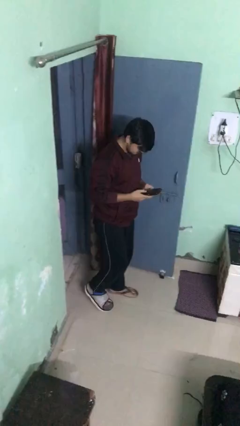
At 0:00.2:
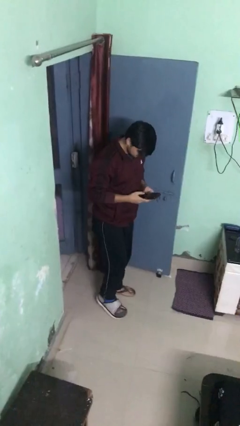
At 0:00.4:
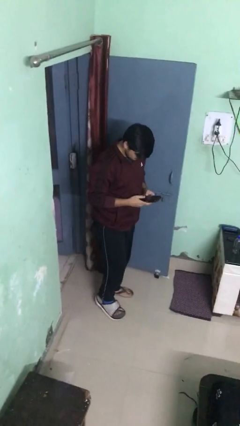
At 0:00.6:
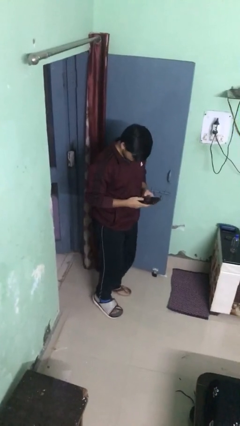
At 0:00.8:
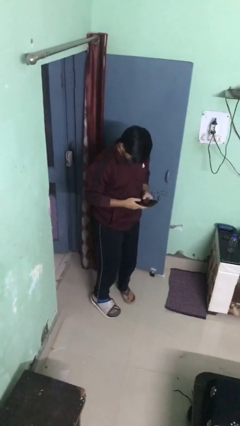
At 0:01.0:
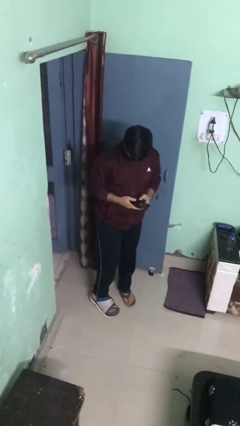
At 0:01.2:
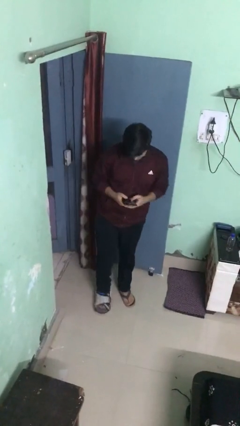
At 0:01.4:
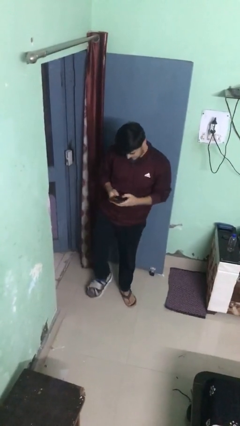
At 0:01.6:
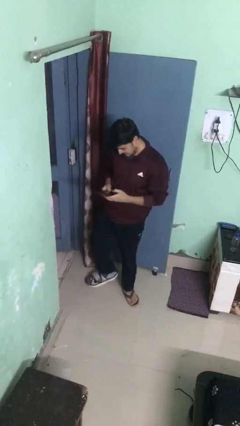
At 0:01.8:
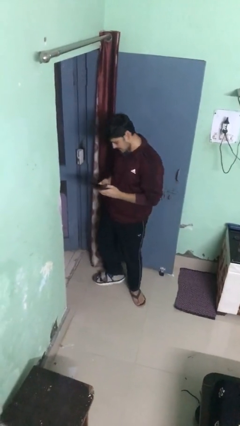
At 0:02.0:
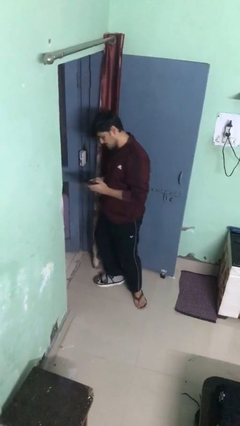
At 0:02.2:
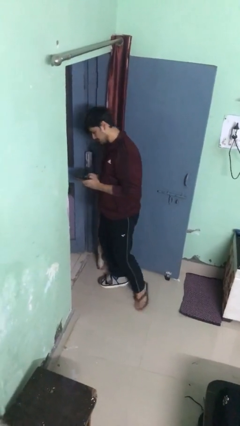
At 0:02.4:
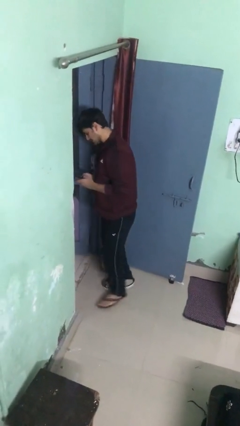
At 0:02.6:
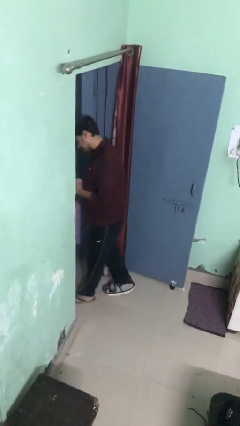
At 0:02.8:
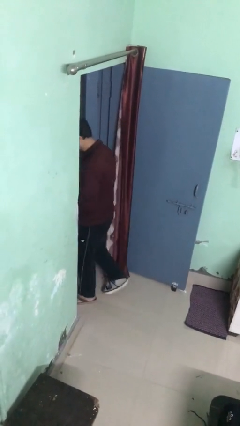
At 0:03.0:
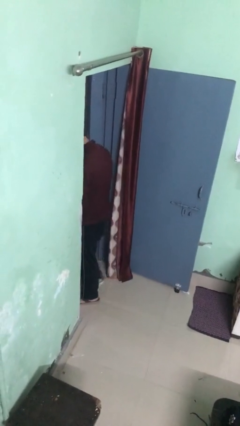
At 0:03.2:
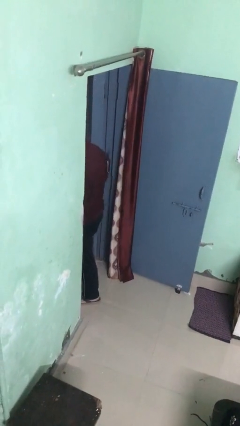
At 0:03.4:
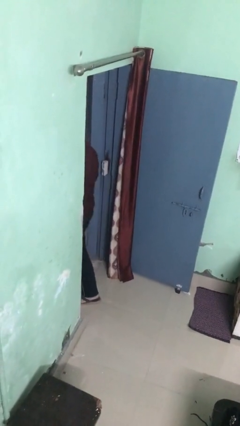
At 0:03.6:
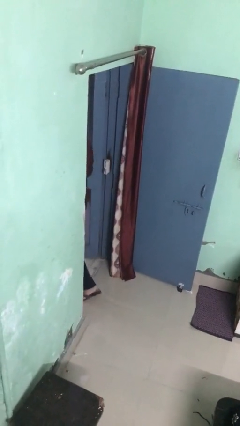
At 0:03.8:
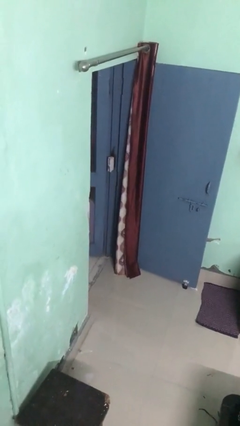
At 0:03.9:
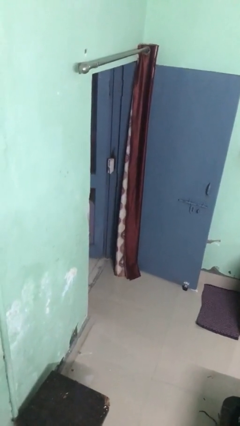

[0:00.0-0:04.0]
person exits scene through structure

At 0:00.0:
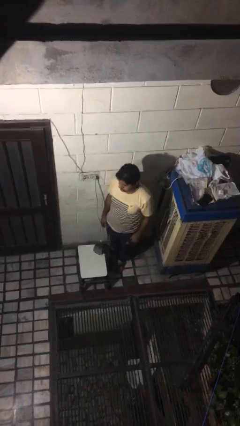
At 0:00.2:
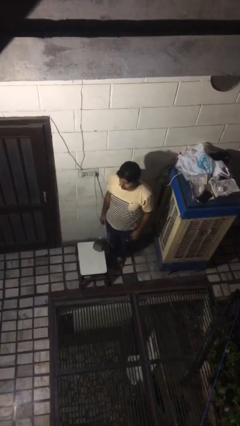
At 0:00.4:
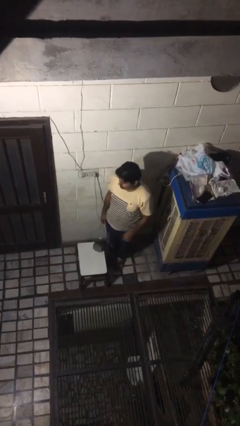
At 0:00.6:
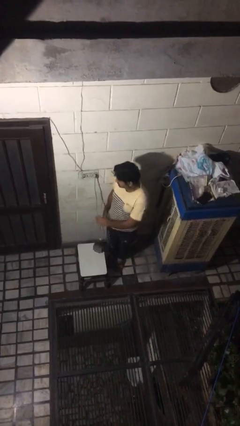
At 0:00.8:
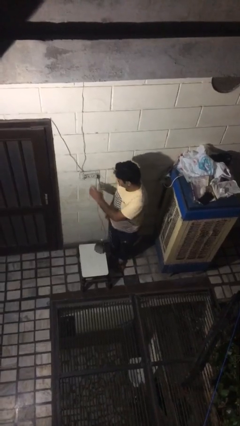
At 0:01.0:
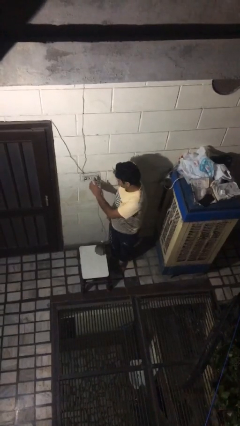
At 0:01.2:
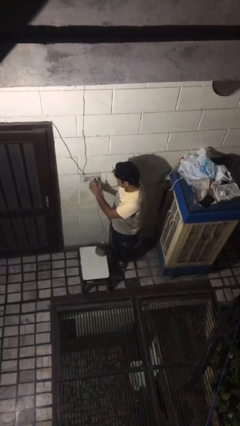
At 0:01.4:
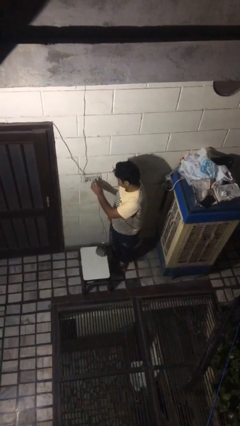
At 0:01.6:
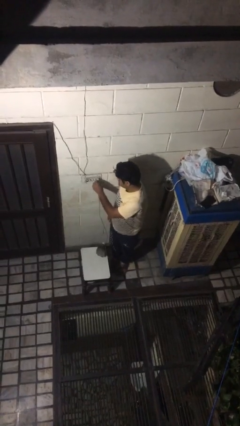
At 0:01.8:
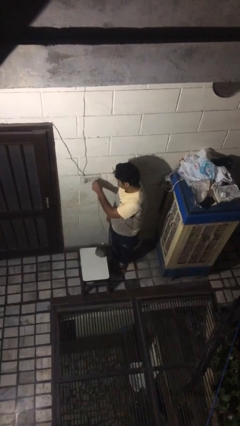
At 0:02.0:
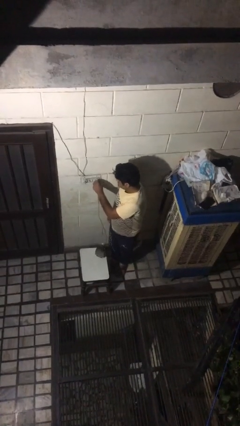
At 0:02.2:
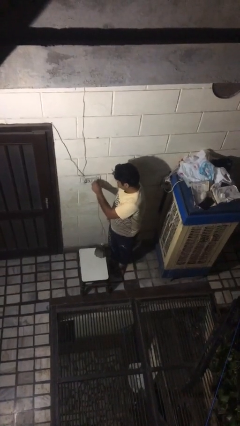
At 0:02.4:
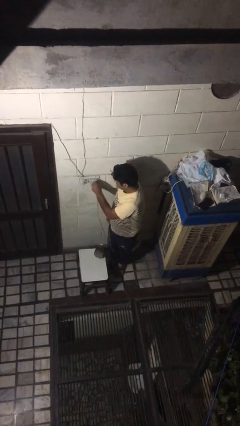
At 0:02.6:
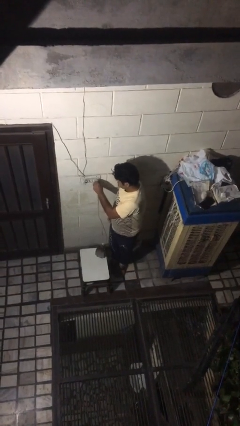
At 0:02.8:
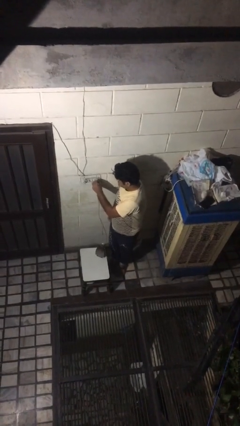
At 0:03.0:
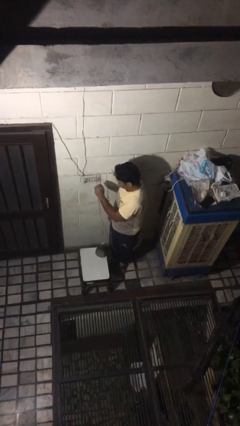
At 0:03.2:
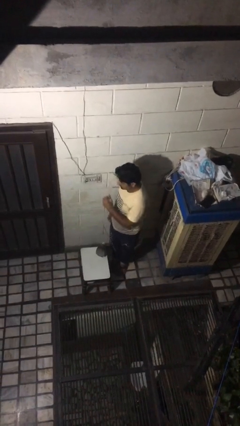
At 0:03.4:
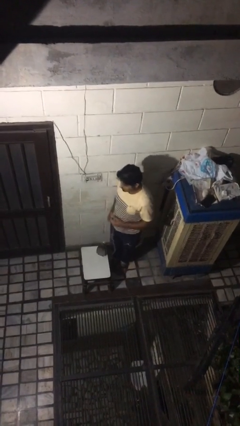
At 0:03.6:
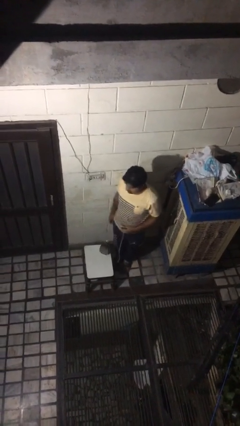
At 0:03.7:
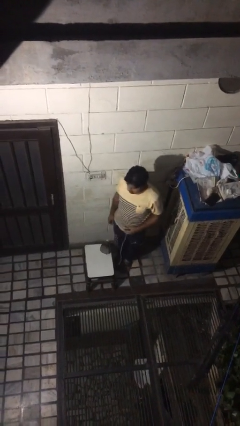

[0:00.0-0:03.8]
person unplugs from electrical socket

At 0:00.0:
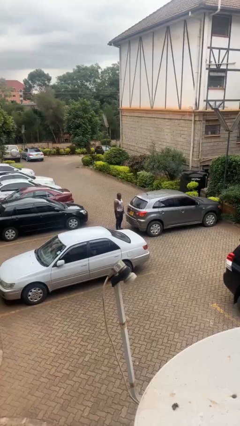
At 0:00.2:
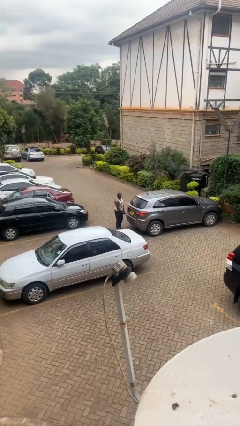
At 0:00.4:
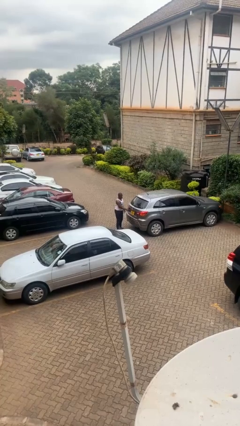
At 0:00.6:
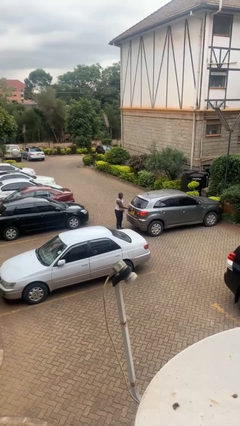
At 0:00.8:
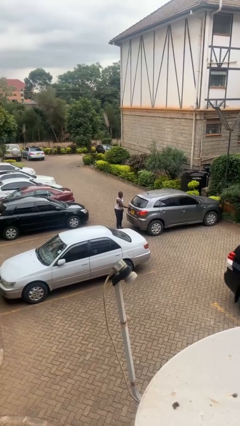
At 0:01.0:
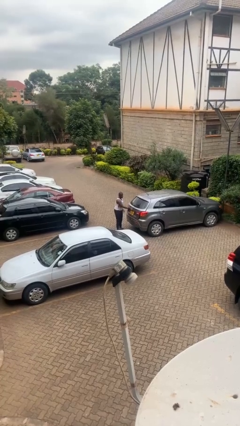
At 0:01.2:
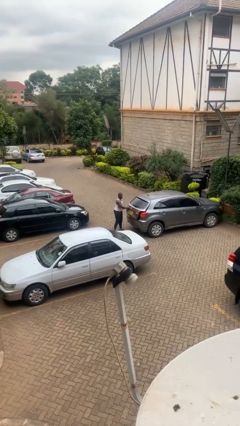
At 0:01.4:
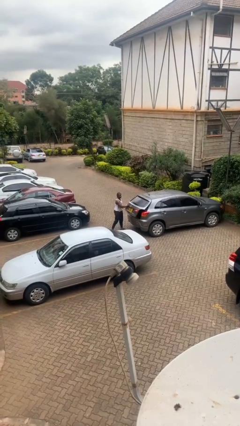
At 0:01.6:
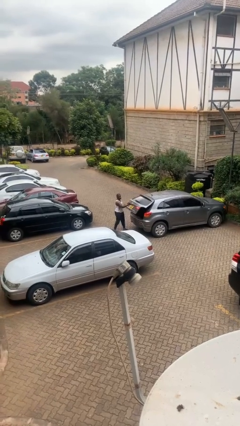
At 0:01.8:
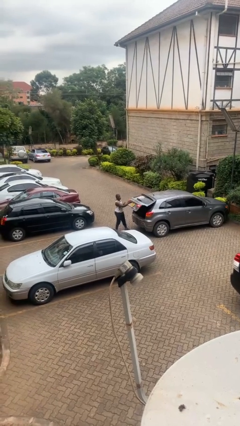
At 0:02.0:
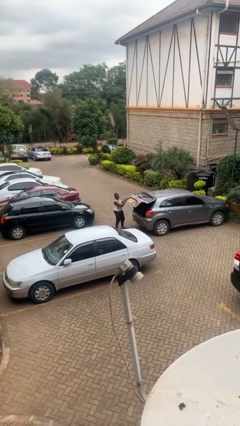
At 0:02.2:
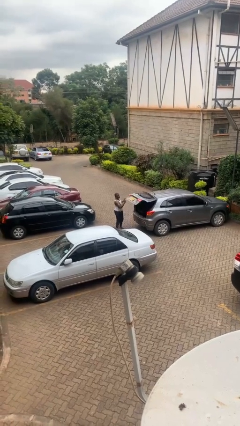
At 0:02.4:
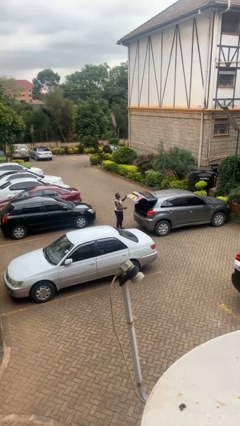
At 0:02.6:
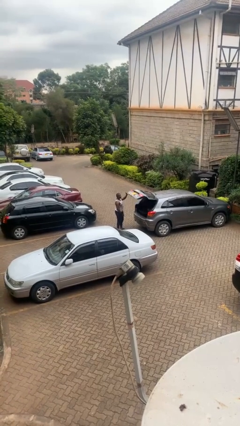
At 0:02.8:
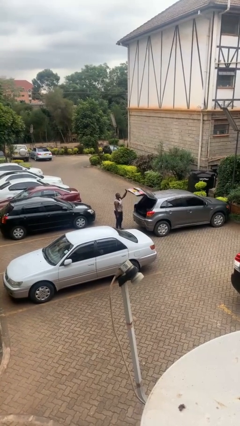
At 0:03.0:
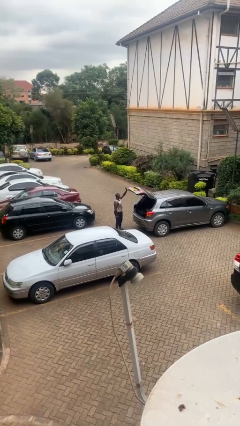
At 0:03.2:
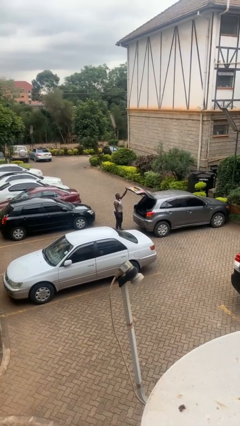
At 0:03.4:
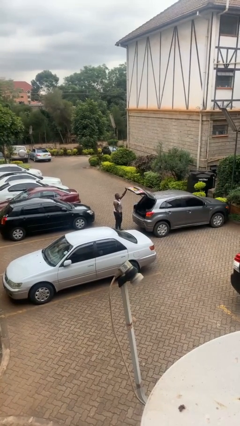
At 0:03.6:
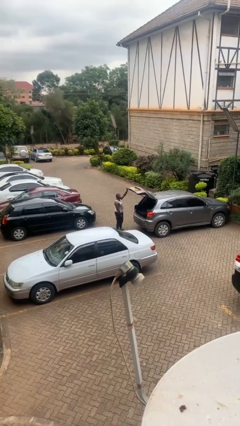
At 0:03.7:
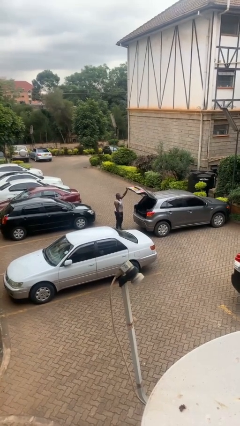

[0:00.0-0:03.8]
person opens car trunk

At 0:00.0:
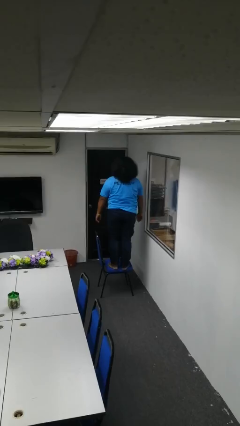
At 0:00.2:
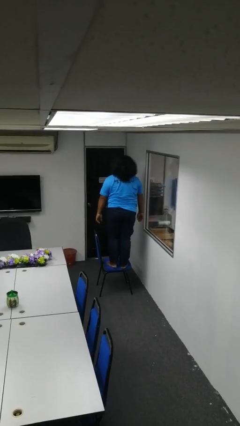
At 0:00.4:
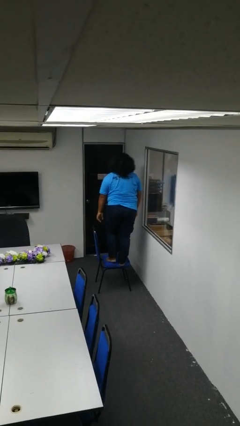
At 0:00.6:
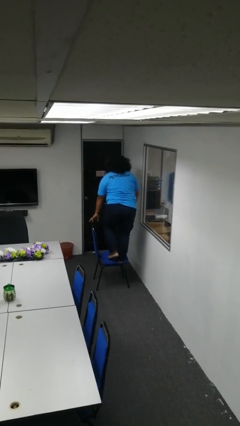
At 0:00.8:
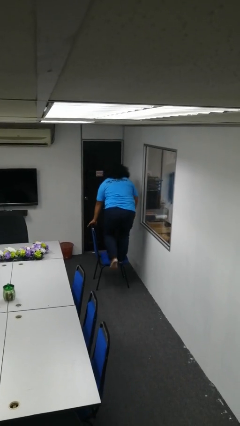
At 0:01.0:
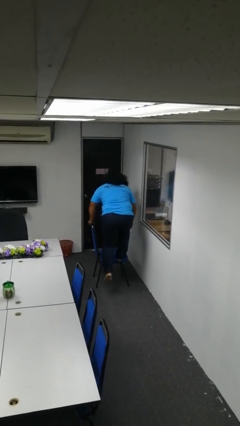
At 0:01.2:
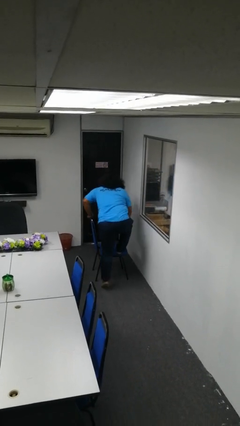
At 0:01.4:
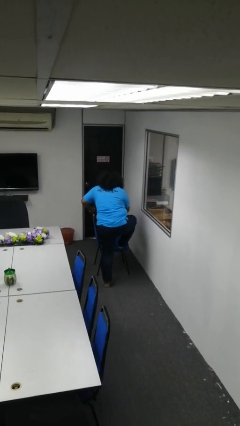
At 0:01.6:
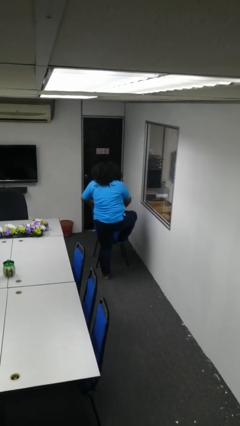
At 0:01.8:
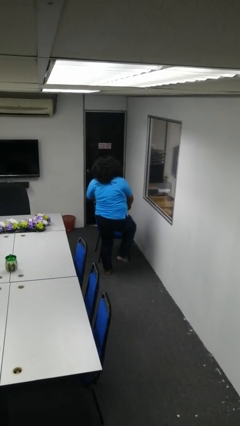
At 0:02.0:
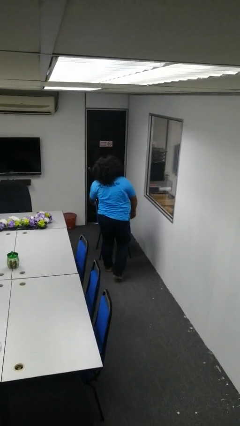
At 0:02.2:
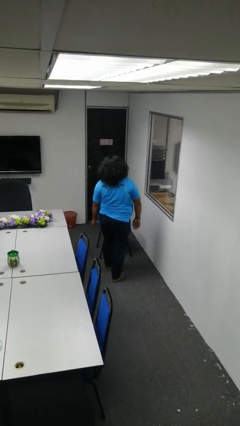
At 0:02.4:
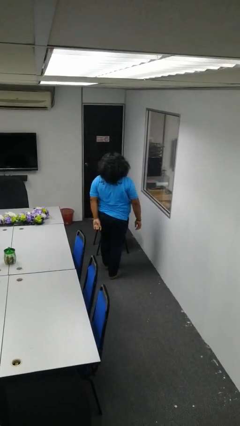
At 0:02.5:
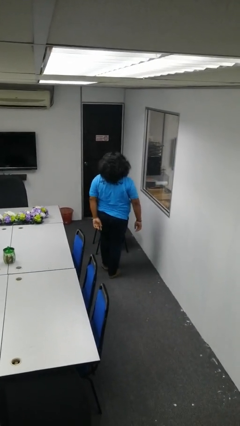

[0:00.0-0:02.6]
person climbs off chair

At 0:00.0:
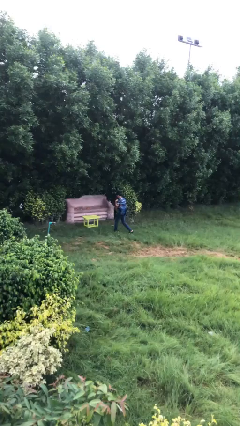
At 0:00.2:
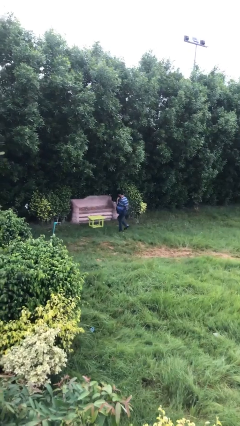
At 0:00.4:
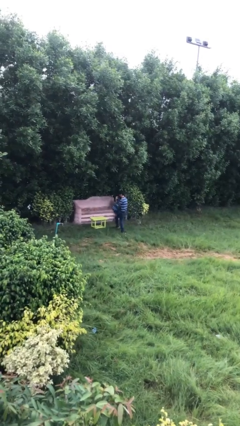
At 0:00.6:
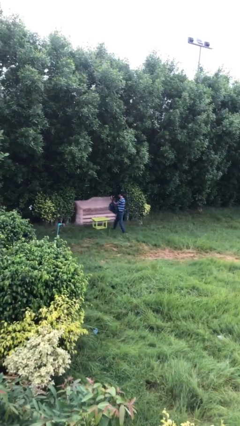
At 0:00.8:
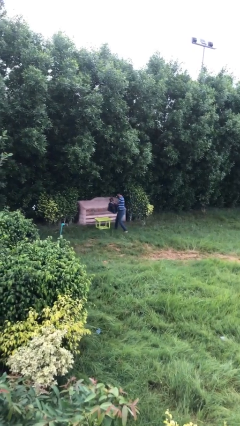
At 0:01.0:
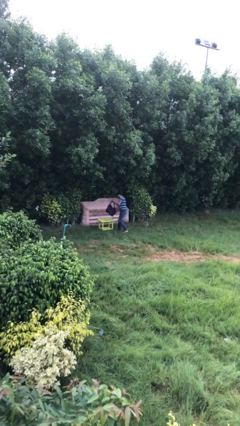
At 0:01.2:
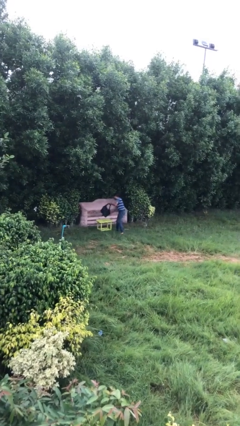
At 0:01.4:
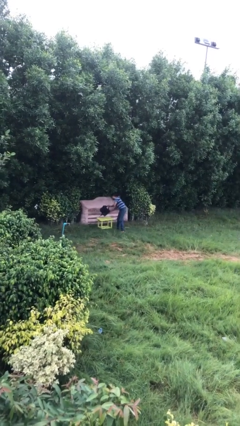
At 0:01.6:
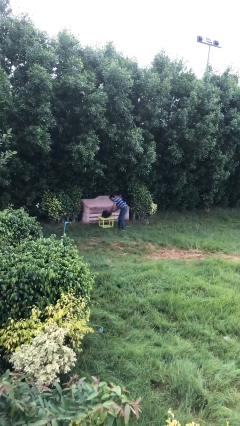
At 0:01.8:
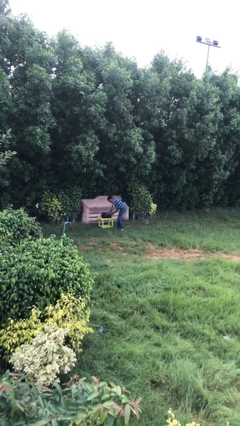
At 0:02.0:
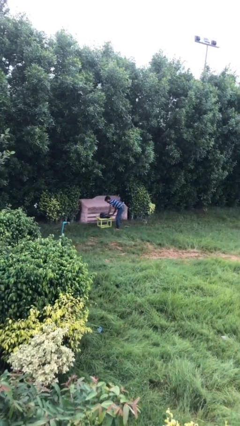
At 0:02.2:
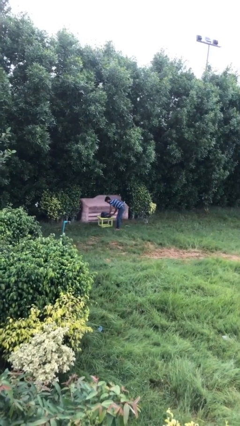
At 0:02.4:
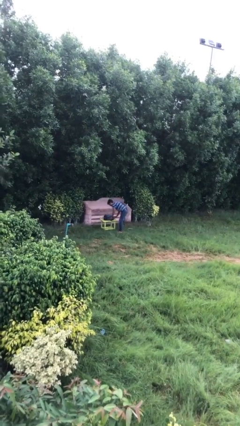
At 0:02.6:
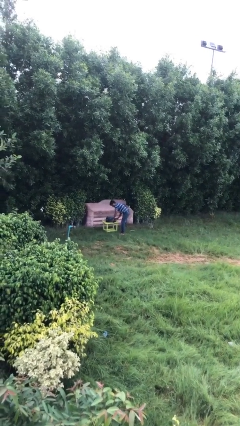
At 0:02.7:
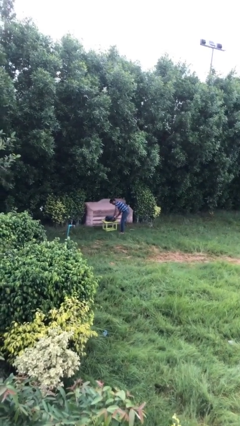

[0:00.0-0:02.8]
person puts down object on table

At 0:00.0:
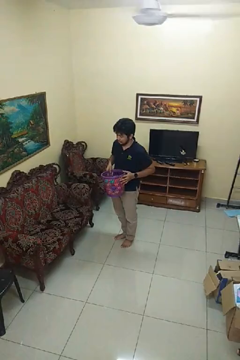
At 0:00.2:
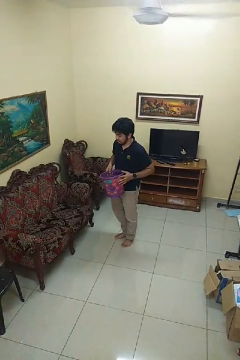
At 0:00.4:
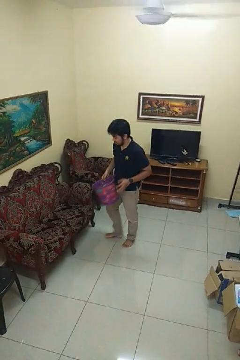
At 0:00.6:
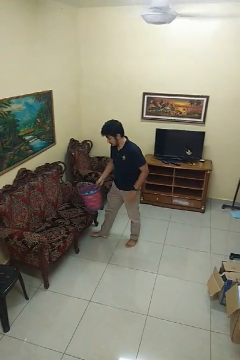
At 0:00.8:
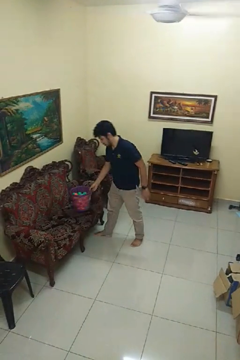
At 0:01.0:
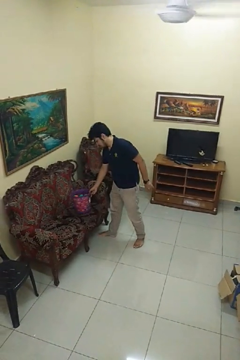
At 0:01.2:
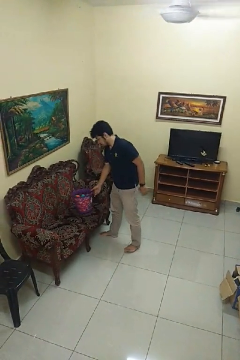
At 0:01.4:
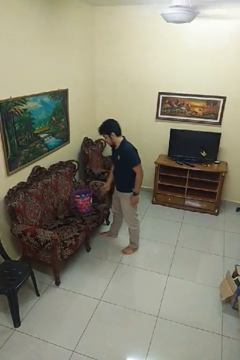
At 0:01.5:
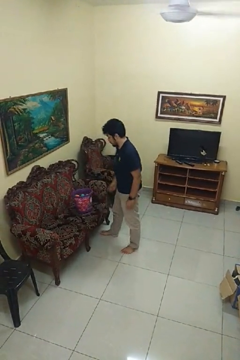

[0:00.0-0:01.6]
person puts down object on couch
